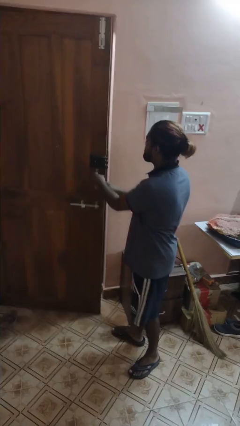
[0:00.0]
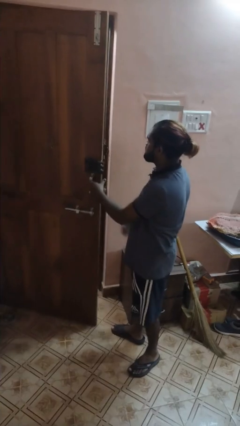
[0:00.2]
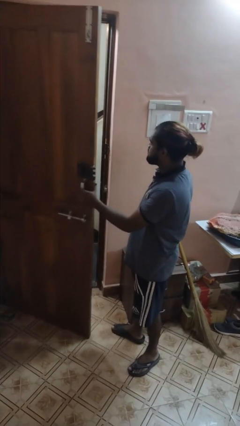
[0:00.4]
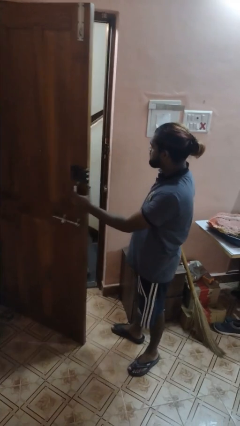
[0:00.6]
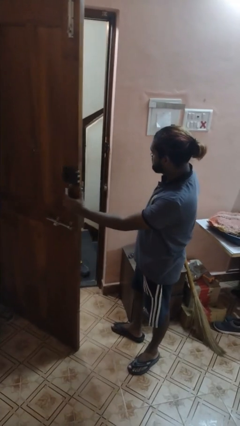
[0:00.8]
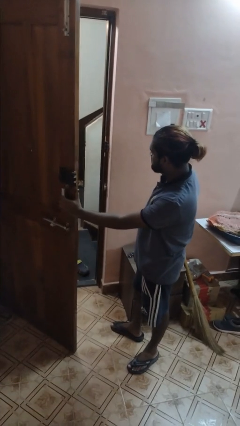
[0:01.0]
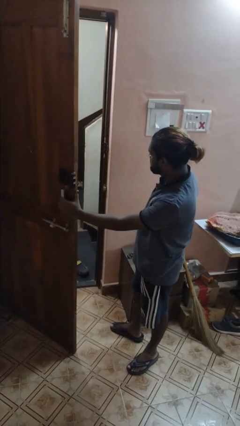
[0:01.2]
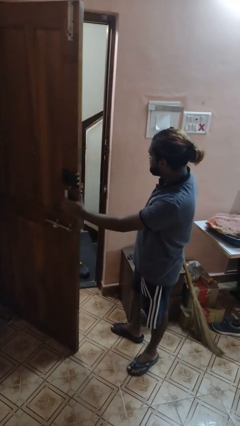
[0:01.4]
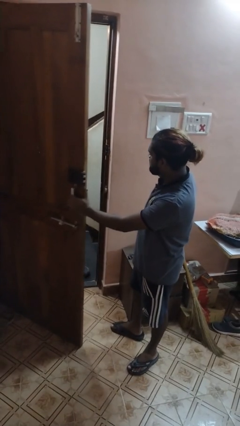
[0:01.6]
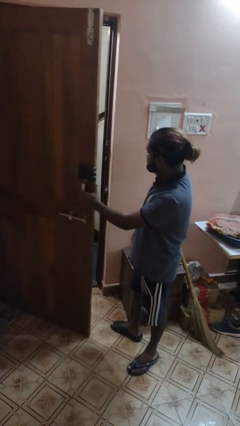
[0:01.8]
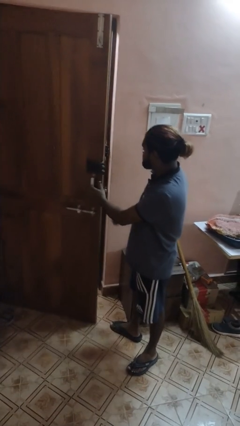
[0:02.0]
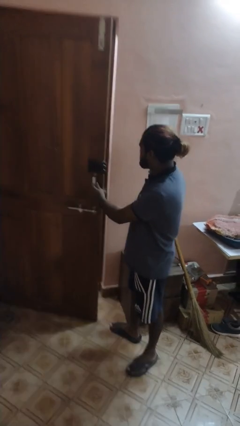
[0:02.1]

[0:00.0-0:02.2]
person opens facility door

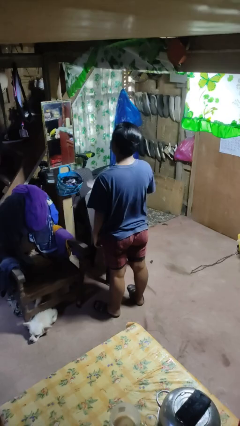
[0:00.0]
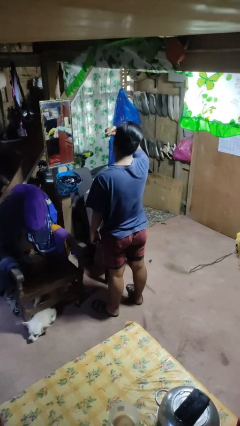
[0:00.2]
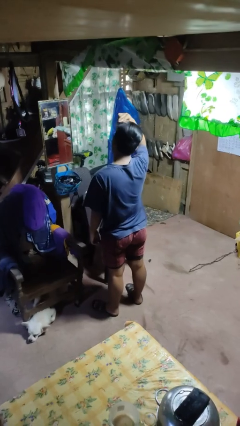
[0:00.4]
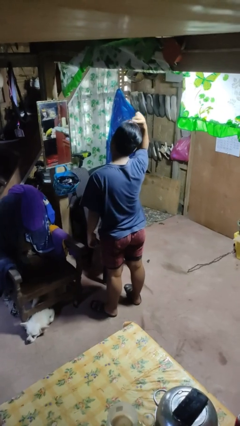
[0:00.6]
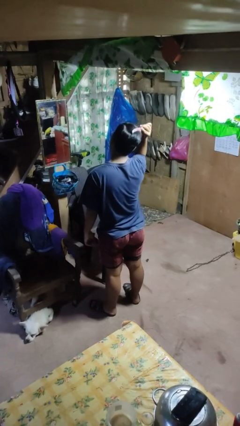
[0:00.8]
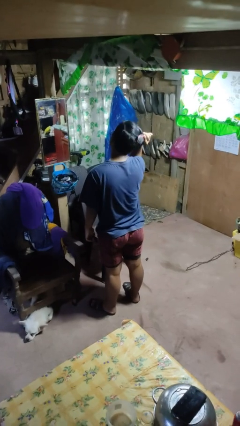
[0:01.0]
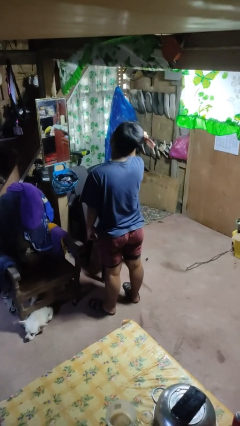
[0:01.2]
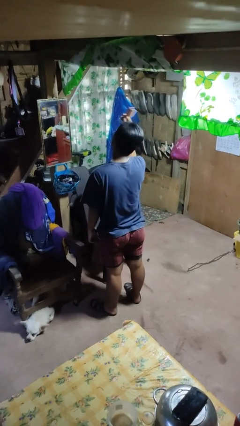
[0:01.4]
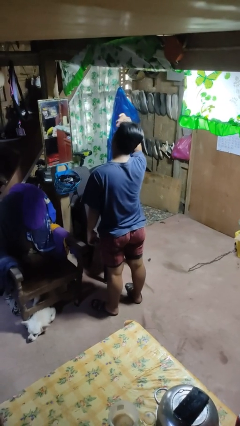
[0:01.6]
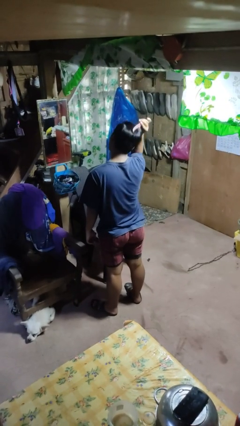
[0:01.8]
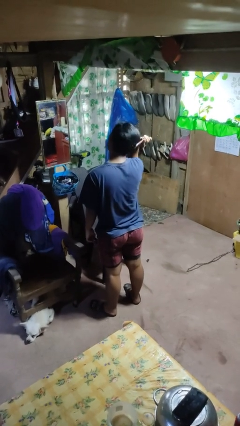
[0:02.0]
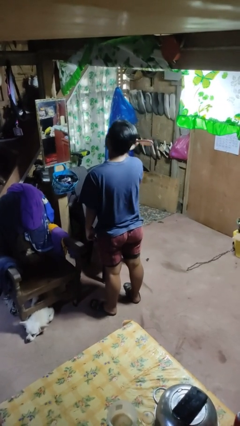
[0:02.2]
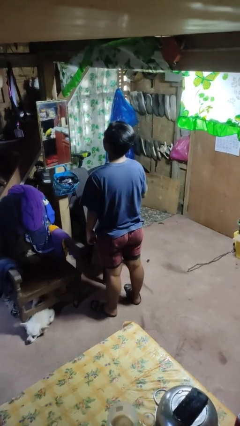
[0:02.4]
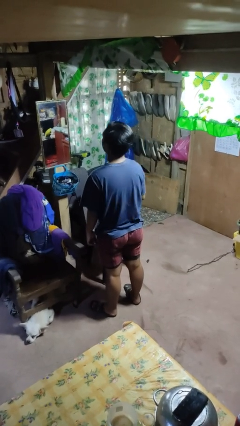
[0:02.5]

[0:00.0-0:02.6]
person brushes hair

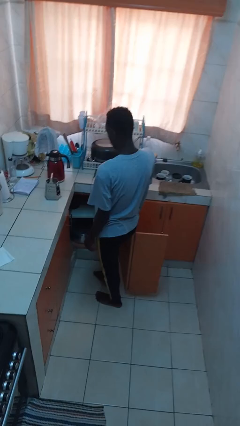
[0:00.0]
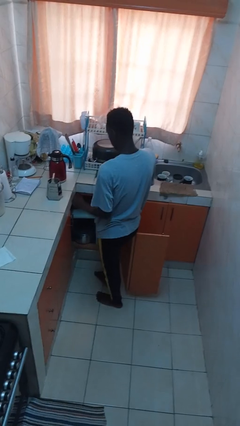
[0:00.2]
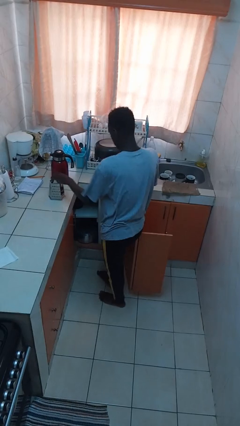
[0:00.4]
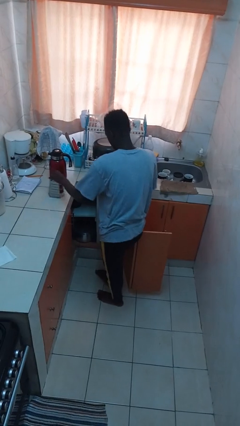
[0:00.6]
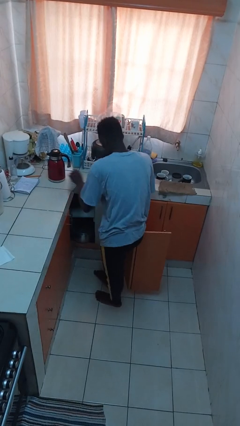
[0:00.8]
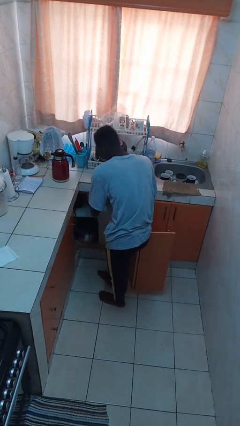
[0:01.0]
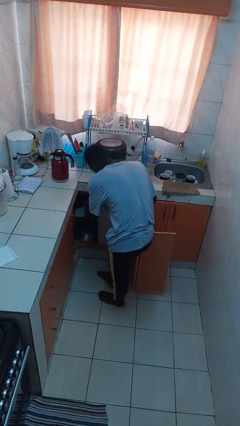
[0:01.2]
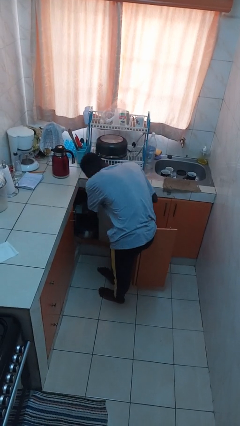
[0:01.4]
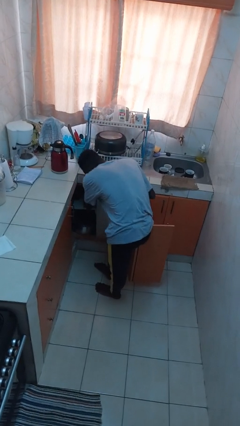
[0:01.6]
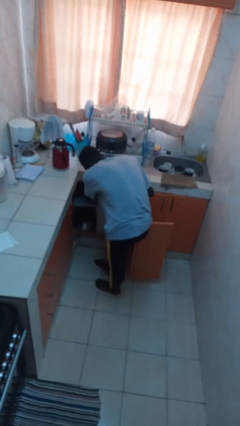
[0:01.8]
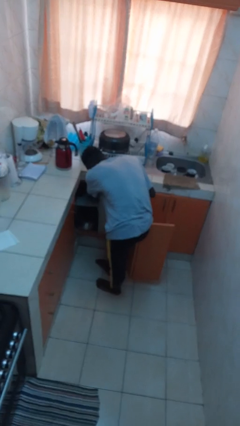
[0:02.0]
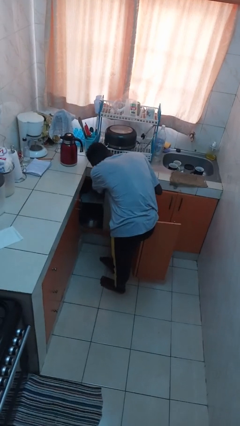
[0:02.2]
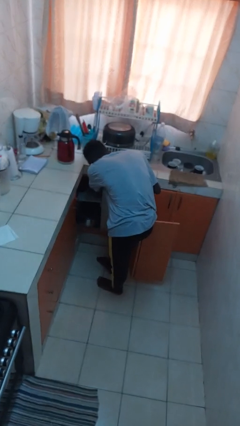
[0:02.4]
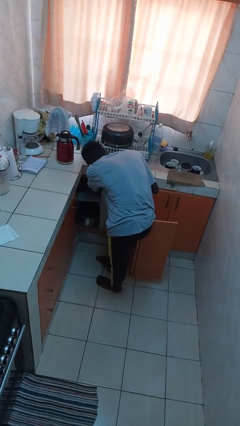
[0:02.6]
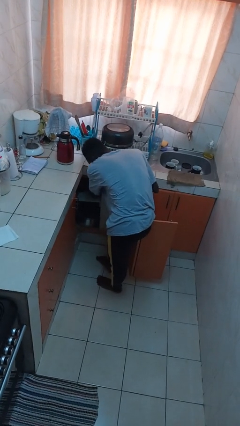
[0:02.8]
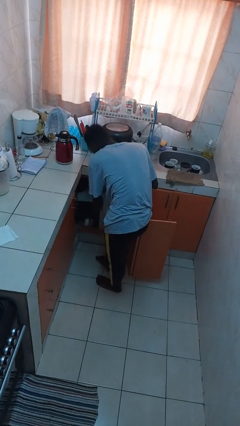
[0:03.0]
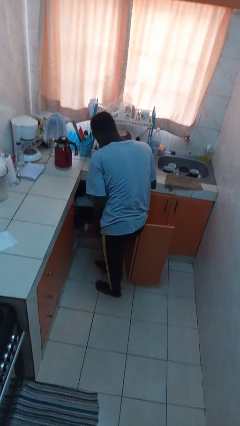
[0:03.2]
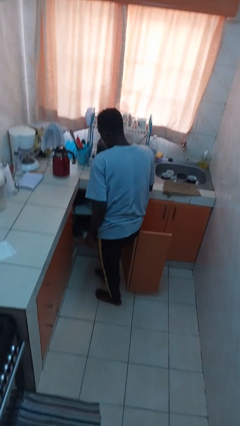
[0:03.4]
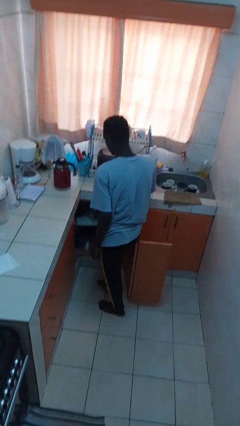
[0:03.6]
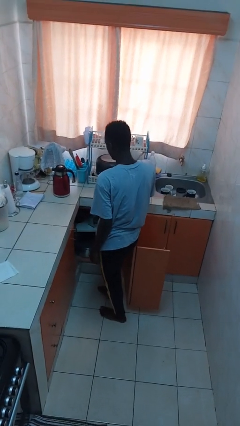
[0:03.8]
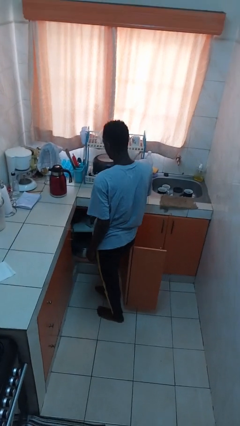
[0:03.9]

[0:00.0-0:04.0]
person puts object in cabinet

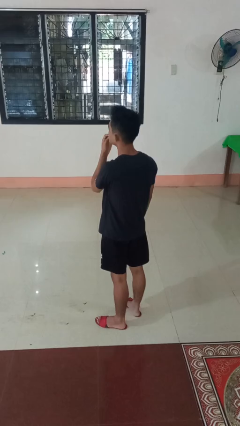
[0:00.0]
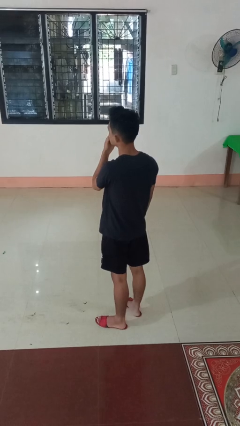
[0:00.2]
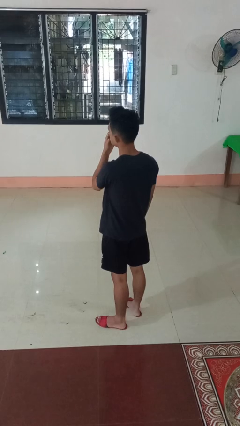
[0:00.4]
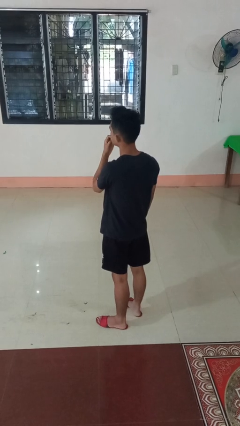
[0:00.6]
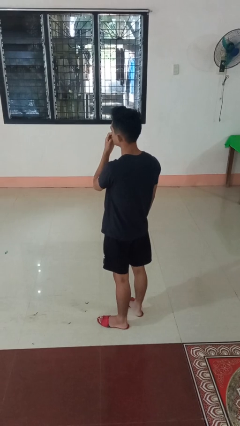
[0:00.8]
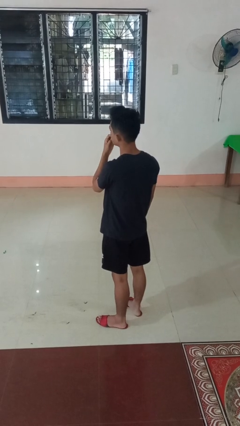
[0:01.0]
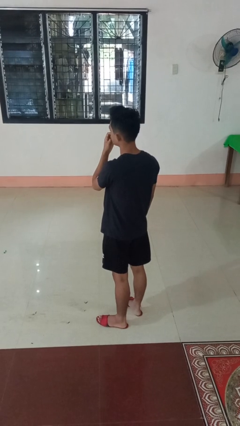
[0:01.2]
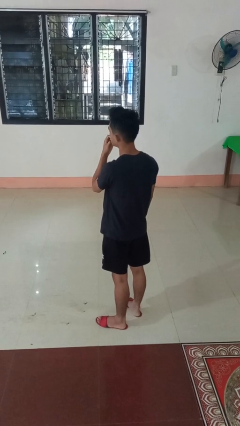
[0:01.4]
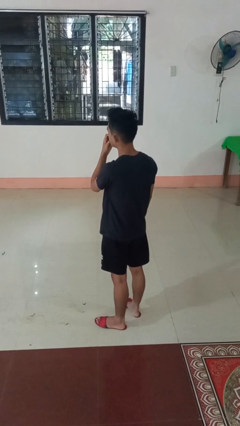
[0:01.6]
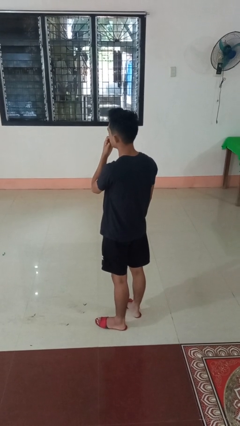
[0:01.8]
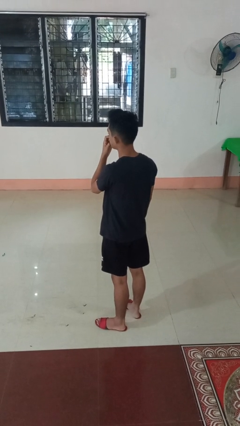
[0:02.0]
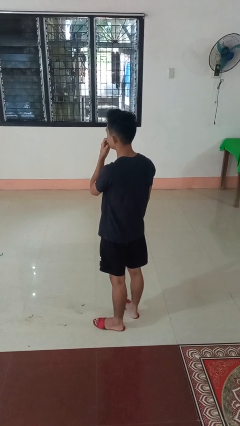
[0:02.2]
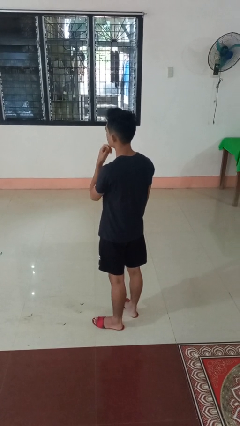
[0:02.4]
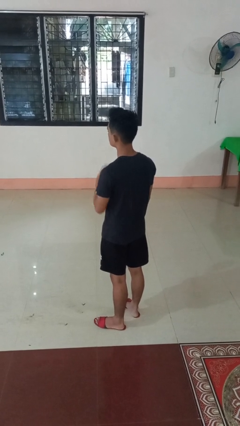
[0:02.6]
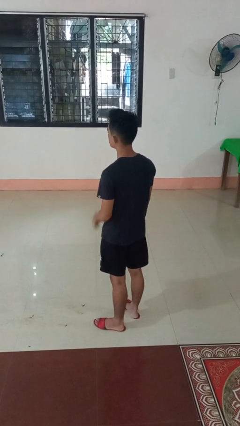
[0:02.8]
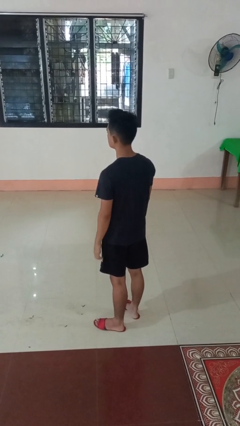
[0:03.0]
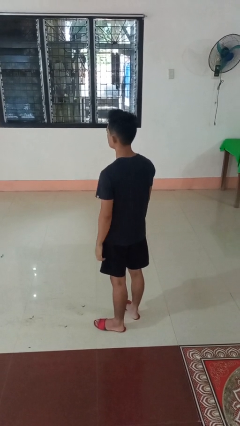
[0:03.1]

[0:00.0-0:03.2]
person scratches face

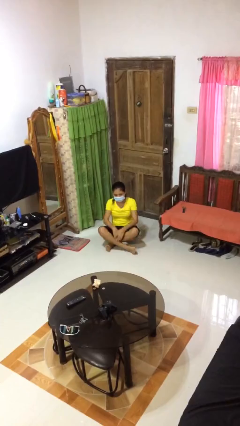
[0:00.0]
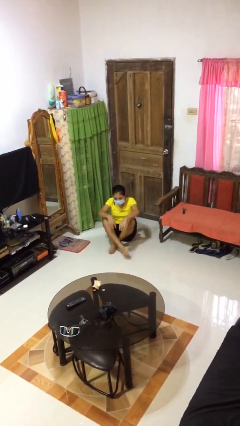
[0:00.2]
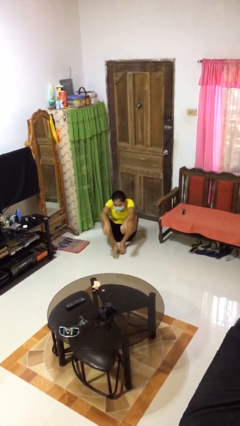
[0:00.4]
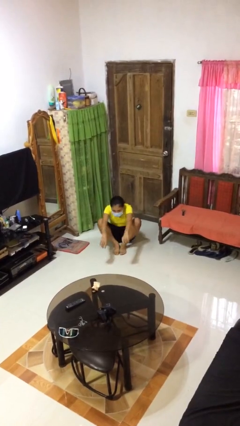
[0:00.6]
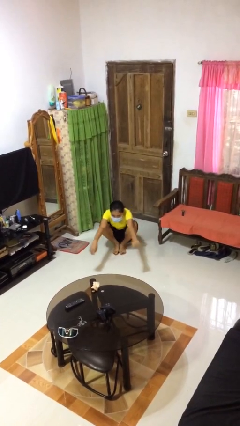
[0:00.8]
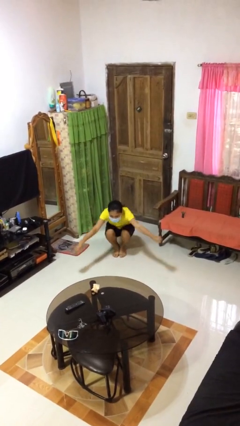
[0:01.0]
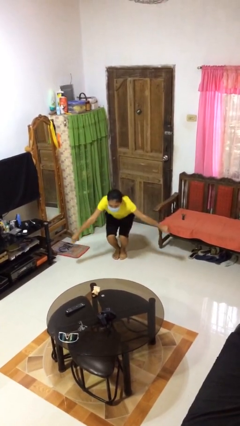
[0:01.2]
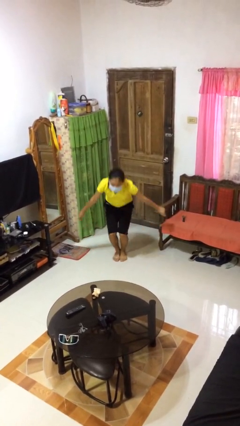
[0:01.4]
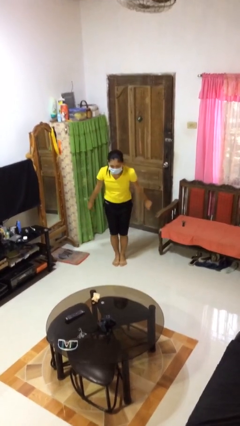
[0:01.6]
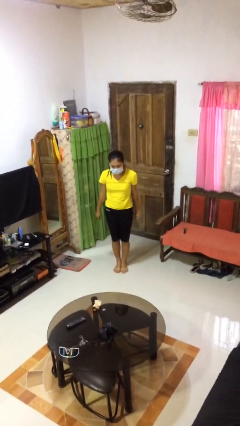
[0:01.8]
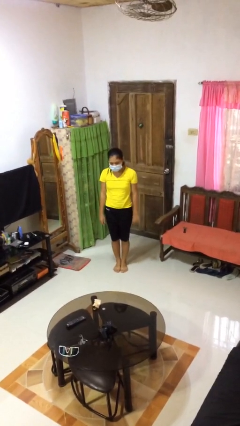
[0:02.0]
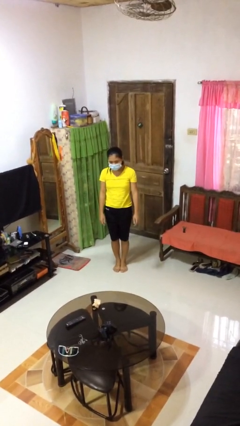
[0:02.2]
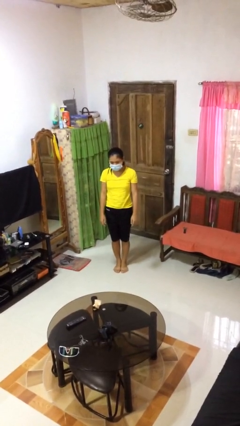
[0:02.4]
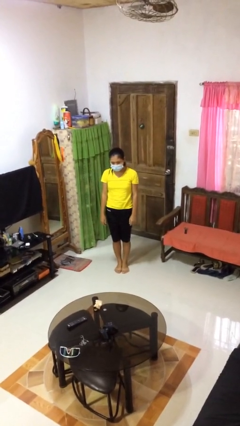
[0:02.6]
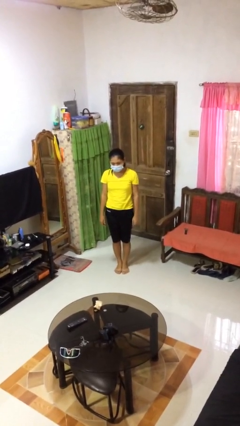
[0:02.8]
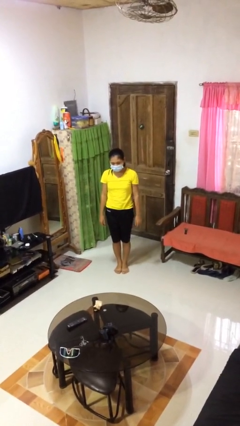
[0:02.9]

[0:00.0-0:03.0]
person stands up from floor

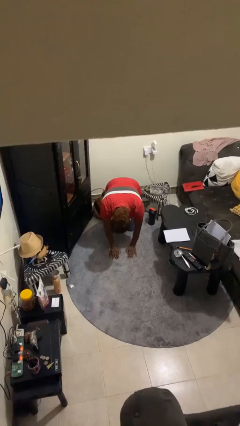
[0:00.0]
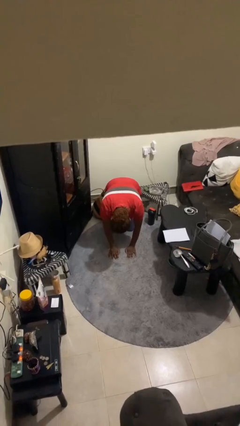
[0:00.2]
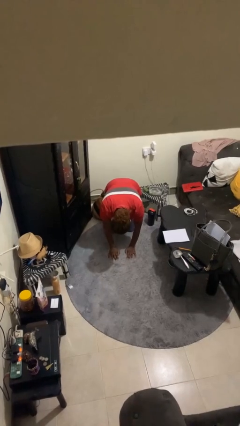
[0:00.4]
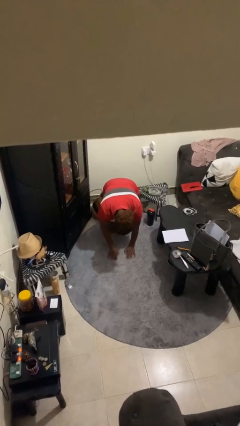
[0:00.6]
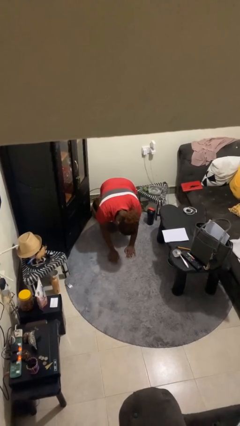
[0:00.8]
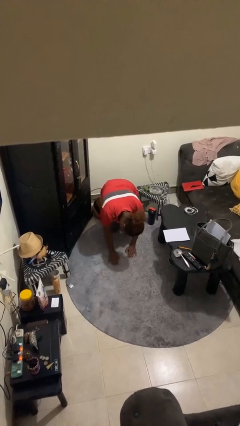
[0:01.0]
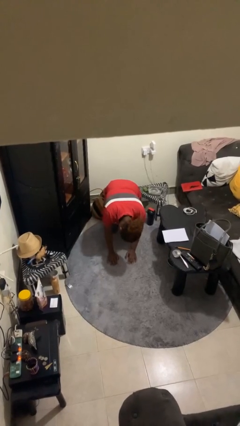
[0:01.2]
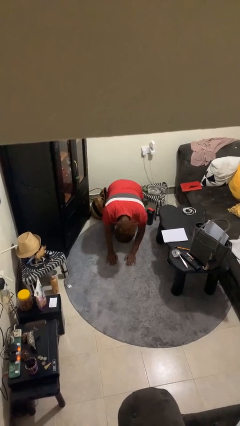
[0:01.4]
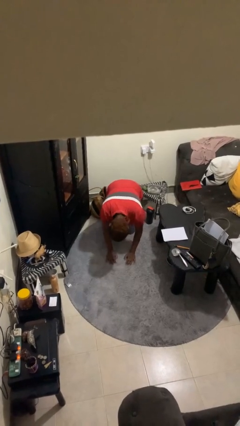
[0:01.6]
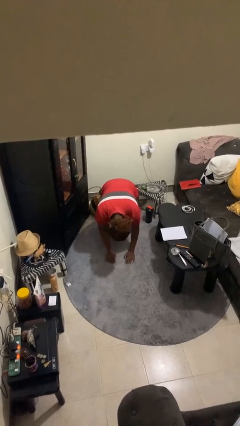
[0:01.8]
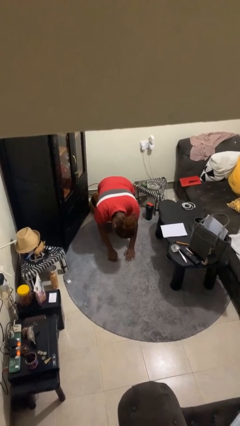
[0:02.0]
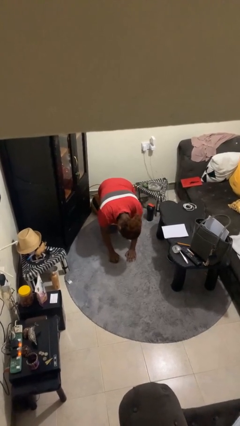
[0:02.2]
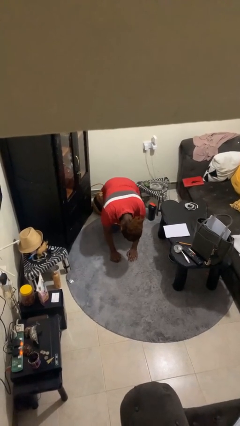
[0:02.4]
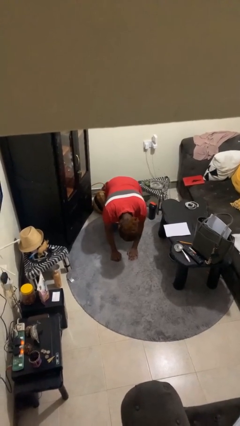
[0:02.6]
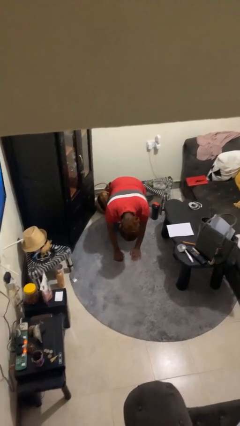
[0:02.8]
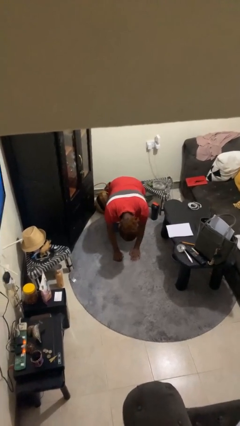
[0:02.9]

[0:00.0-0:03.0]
person crawls
